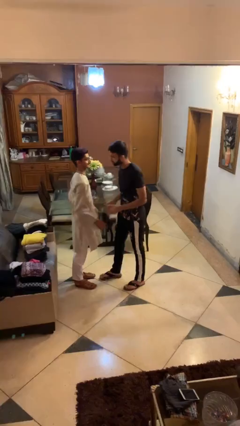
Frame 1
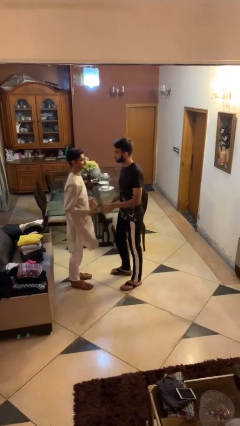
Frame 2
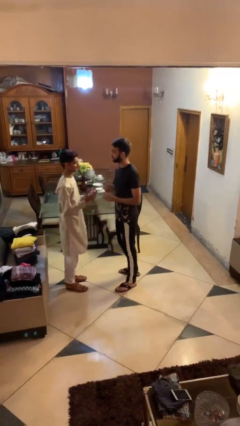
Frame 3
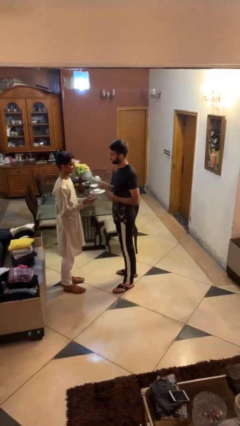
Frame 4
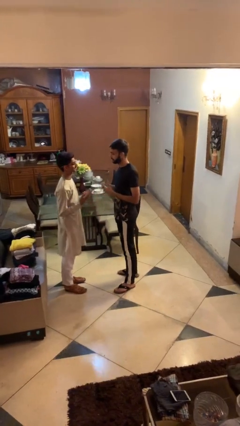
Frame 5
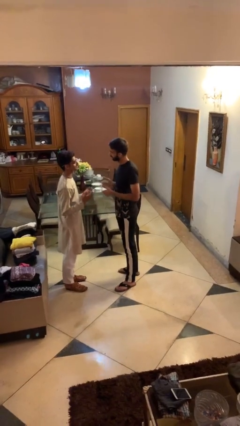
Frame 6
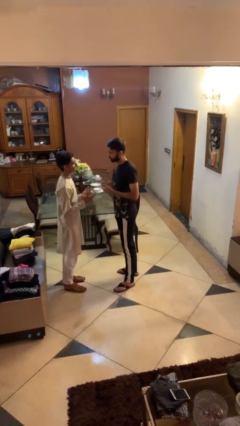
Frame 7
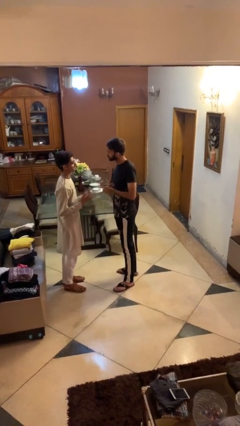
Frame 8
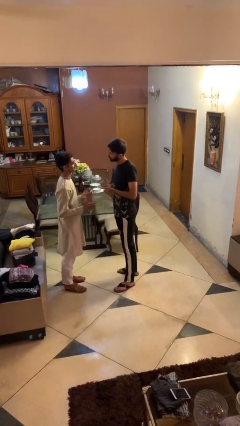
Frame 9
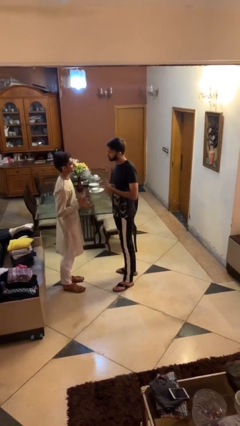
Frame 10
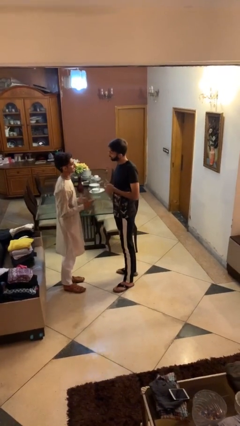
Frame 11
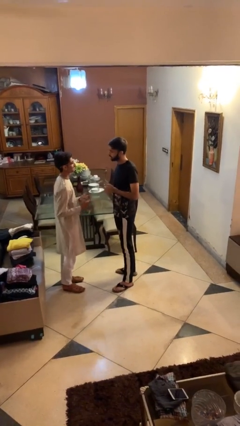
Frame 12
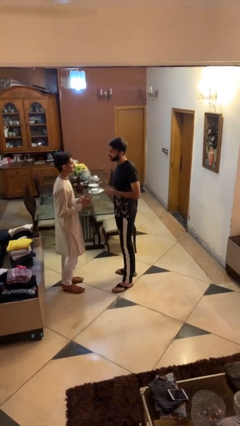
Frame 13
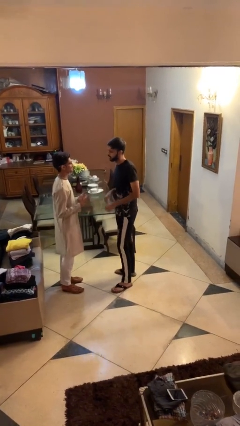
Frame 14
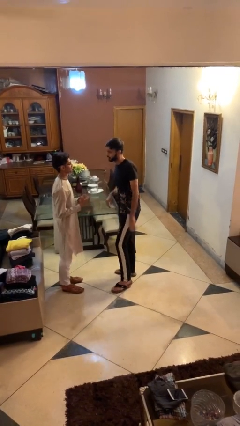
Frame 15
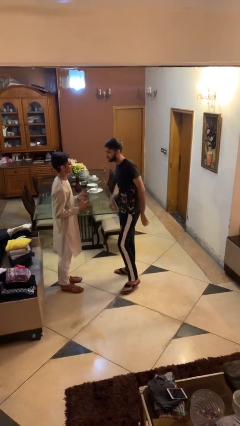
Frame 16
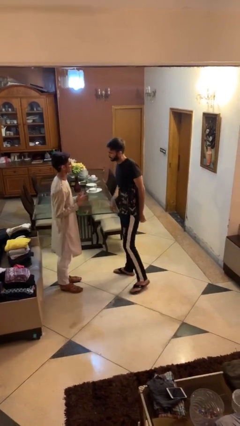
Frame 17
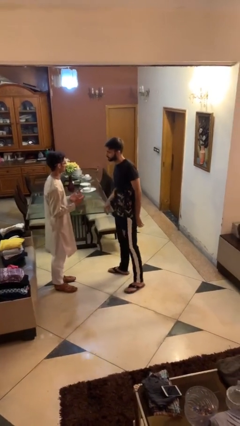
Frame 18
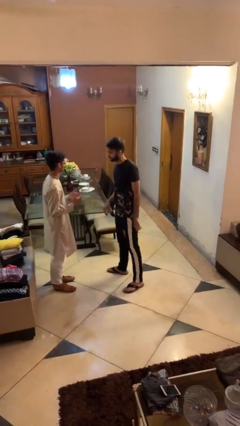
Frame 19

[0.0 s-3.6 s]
person talks to person

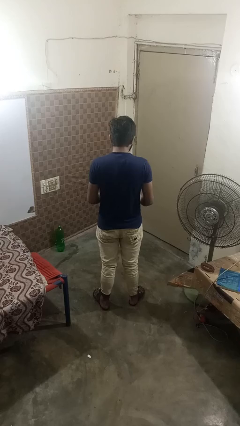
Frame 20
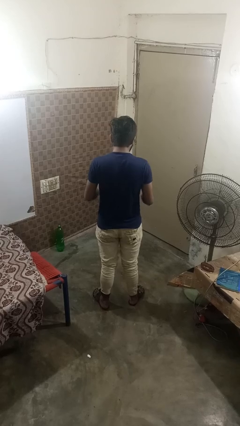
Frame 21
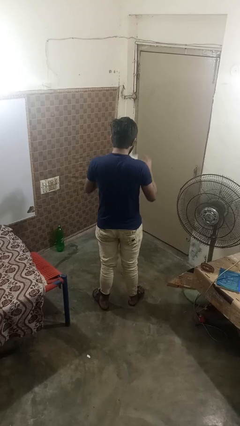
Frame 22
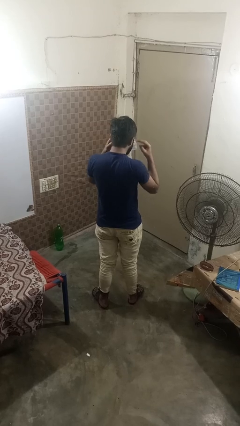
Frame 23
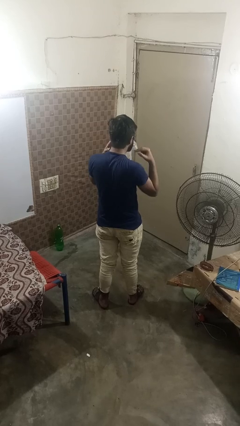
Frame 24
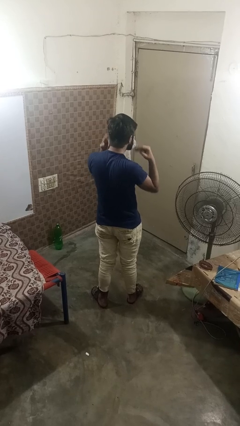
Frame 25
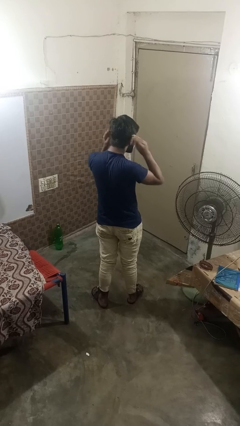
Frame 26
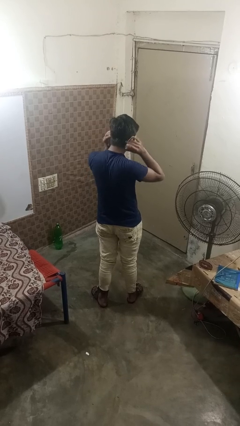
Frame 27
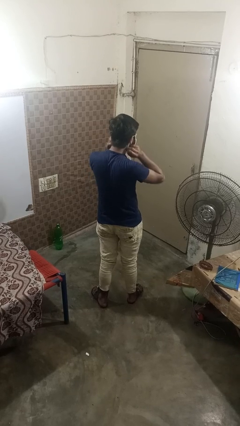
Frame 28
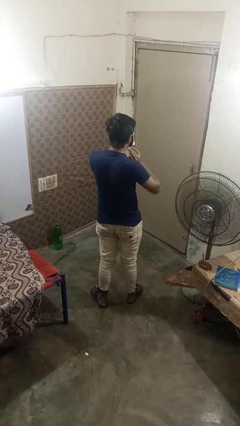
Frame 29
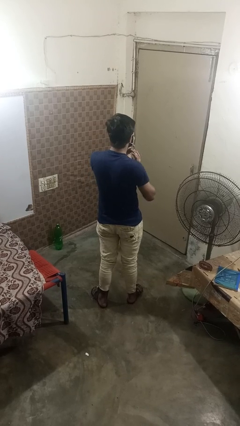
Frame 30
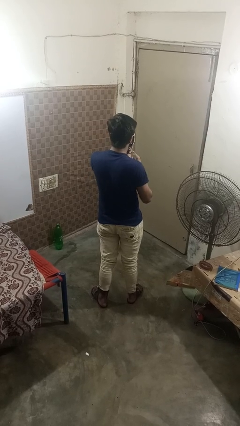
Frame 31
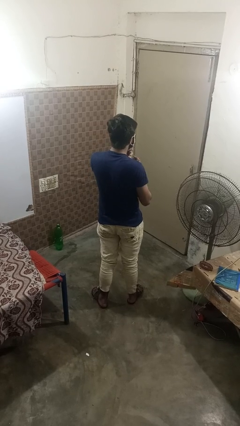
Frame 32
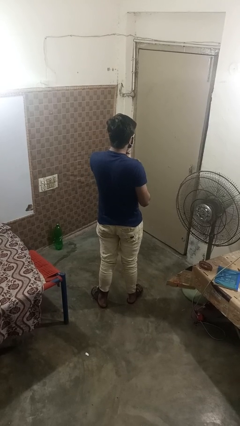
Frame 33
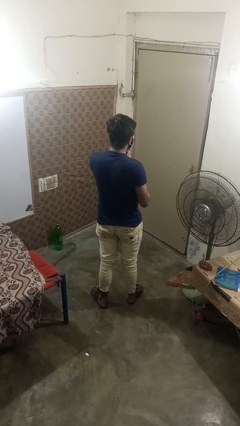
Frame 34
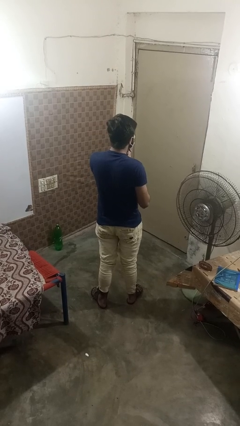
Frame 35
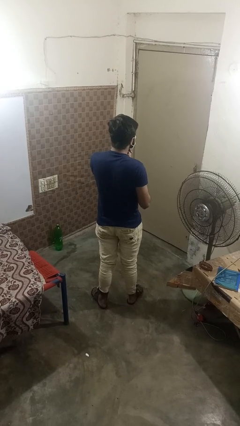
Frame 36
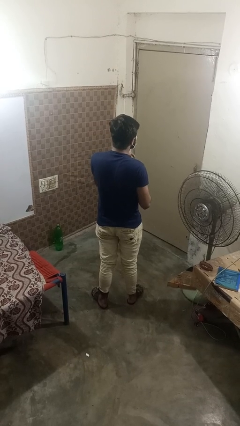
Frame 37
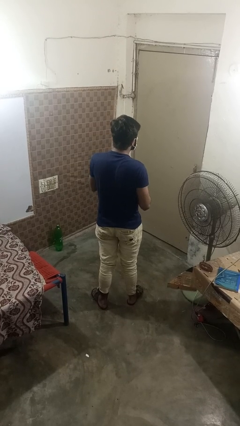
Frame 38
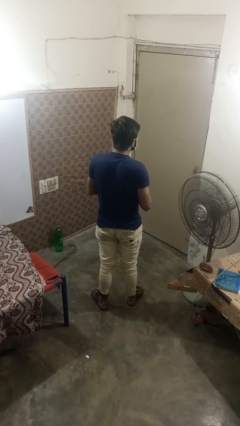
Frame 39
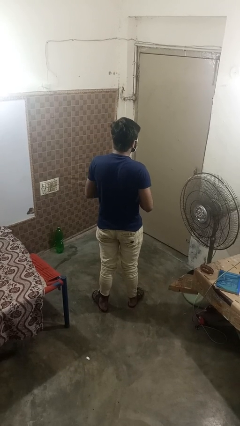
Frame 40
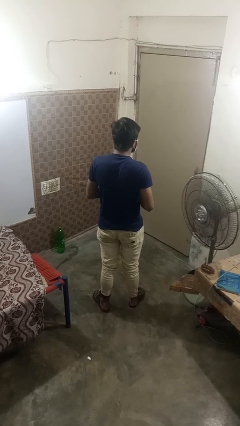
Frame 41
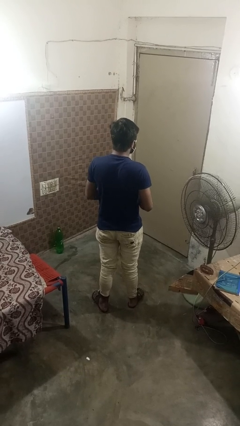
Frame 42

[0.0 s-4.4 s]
person puts on facemask

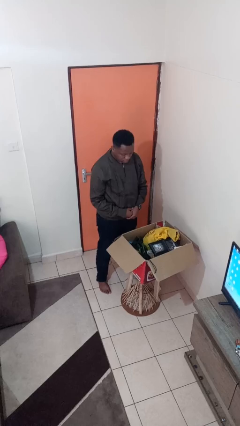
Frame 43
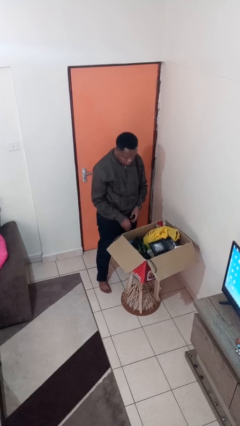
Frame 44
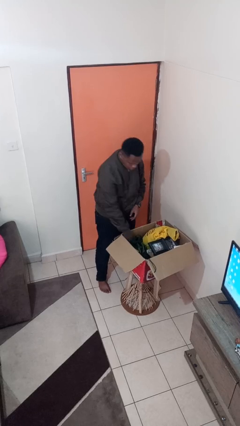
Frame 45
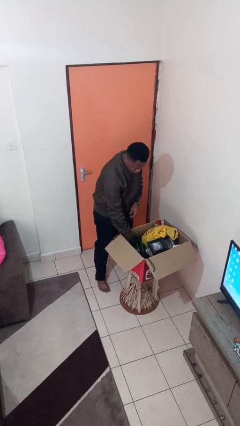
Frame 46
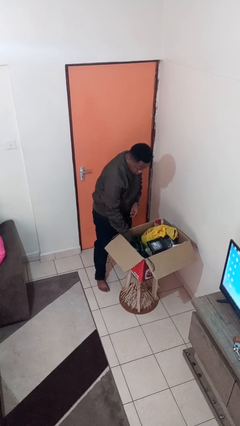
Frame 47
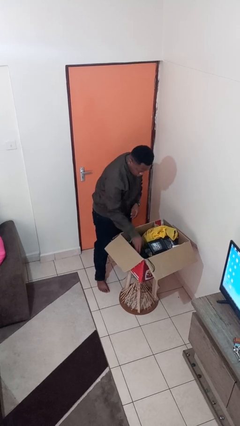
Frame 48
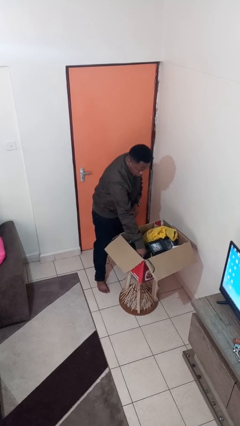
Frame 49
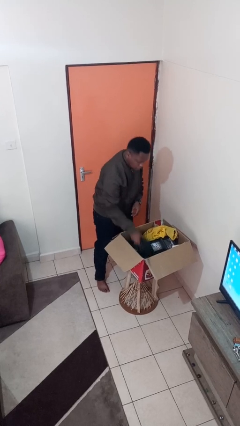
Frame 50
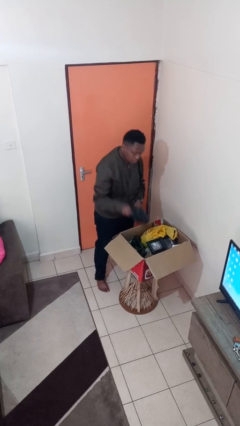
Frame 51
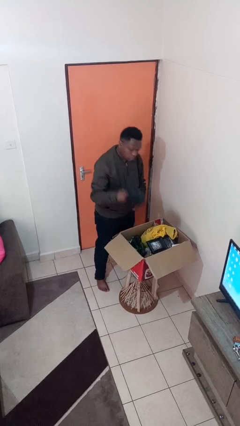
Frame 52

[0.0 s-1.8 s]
person takes object from box

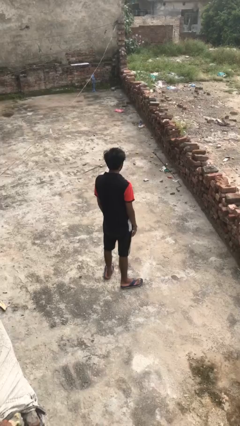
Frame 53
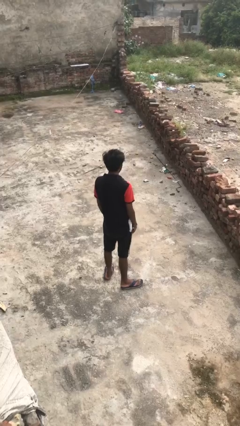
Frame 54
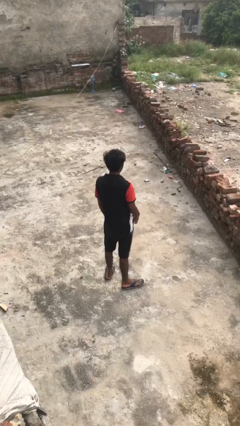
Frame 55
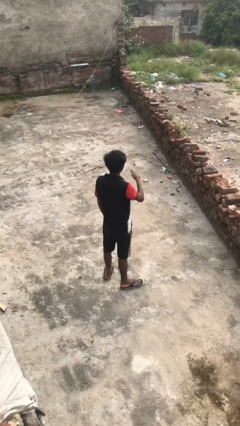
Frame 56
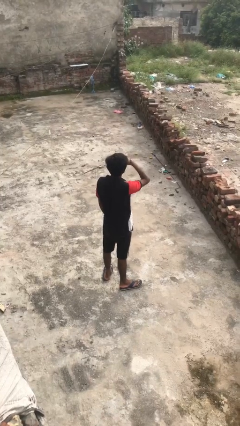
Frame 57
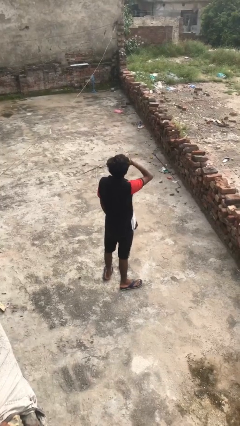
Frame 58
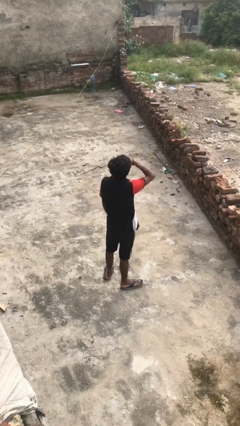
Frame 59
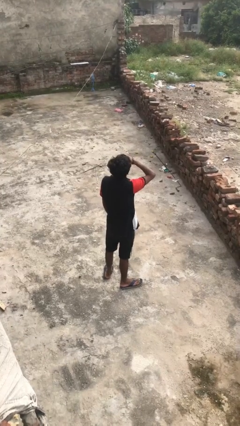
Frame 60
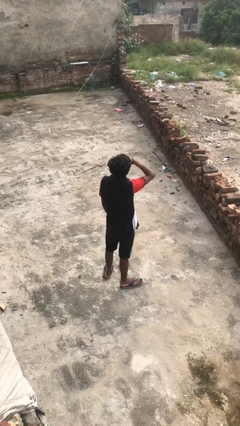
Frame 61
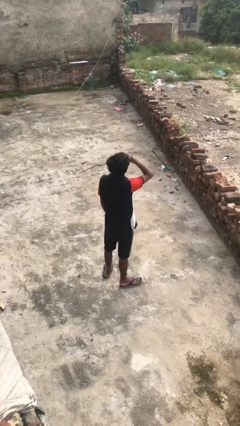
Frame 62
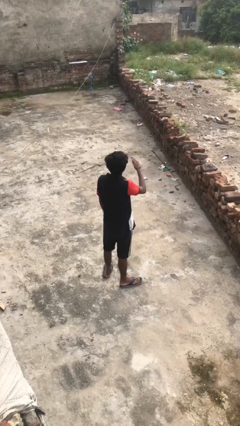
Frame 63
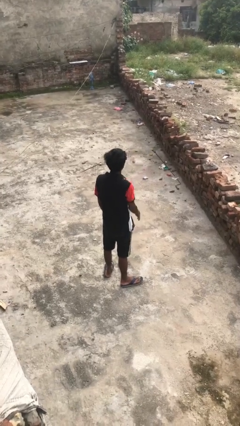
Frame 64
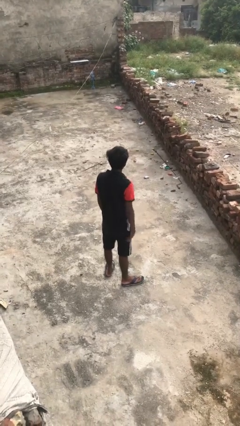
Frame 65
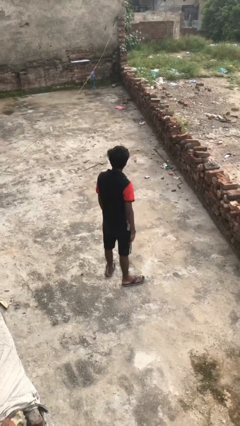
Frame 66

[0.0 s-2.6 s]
person shades eyes

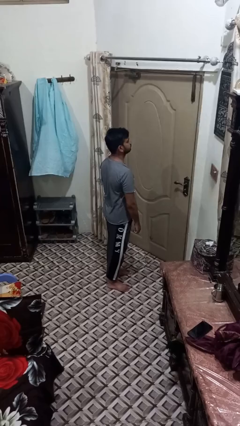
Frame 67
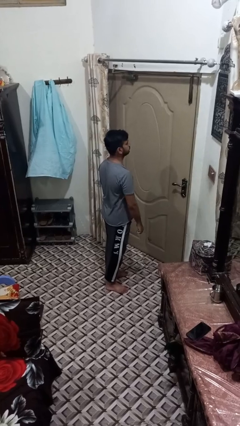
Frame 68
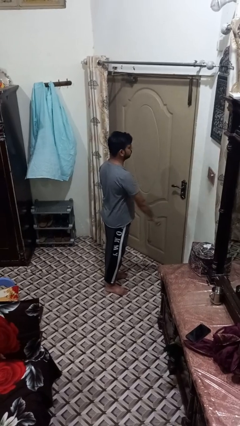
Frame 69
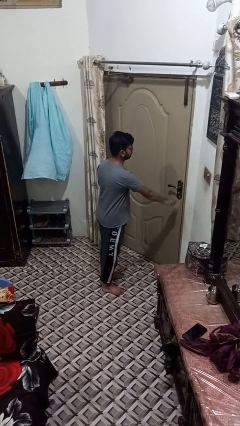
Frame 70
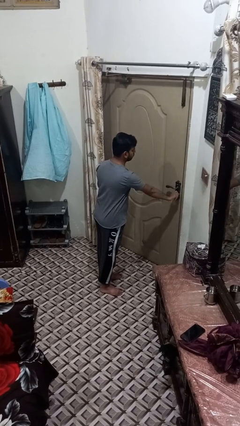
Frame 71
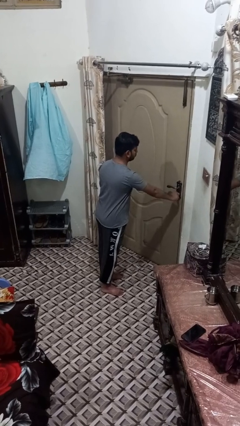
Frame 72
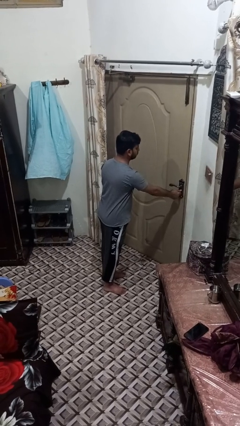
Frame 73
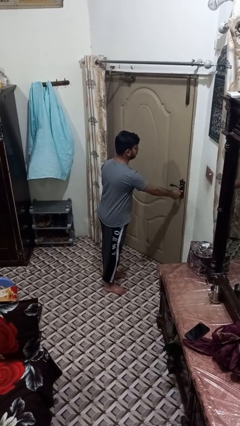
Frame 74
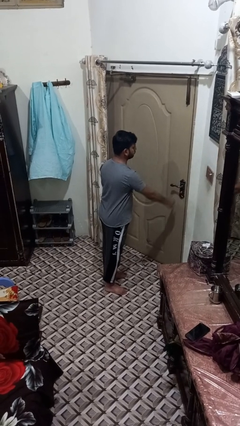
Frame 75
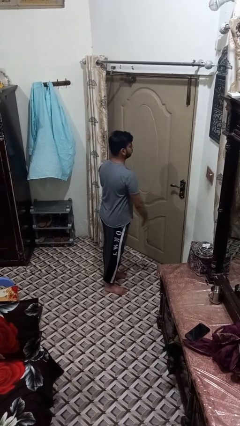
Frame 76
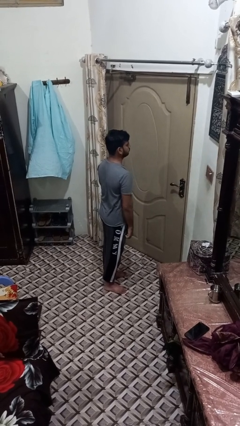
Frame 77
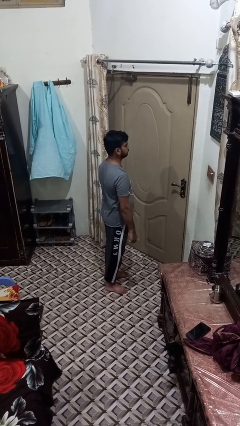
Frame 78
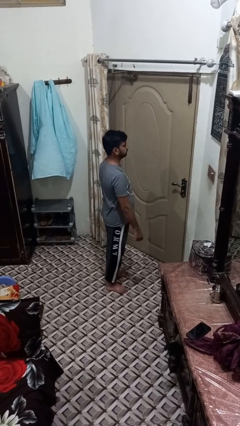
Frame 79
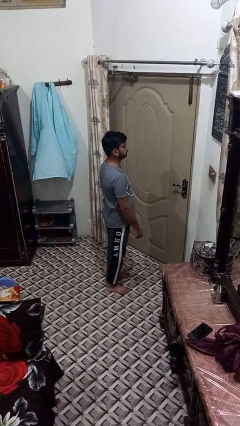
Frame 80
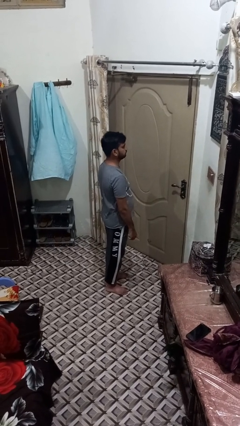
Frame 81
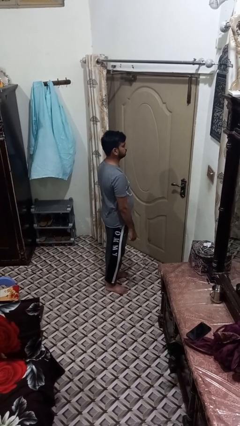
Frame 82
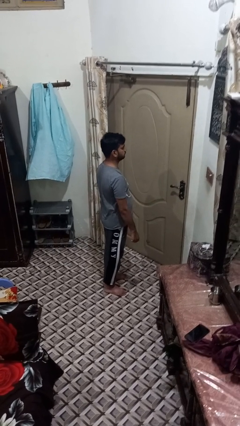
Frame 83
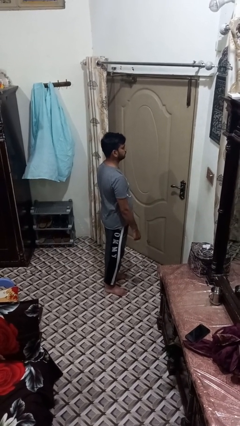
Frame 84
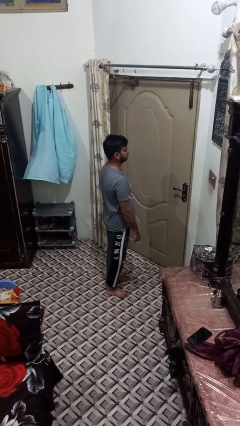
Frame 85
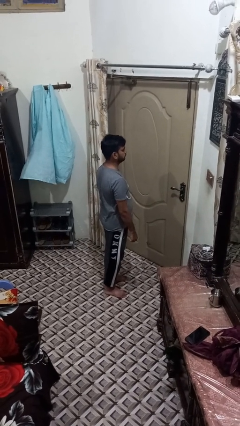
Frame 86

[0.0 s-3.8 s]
person locks door with keys

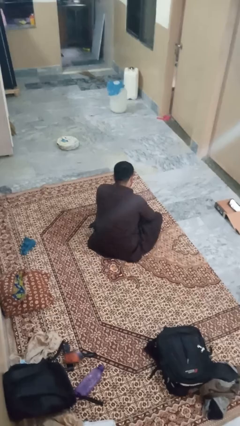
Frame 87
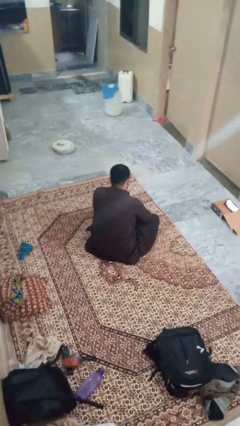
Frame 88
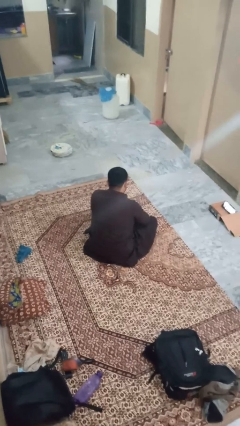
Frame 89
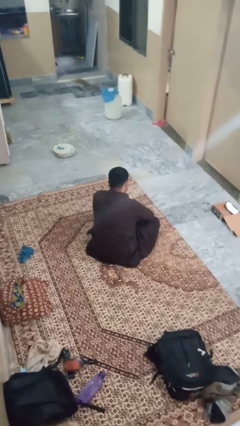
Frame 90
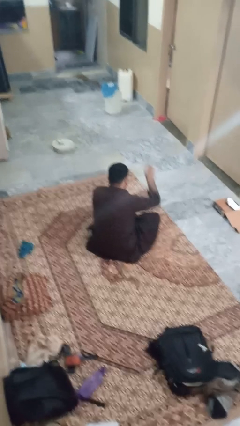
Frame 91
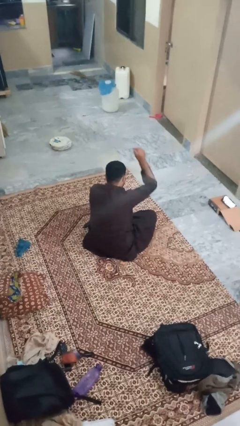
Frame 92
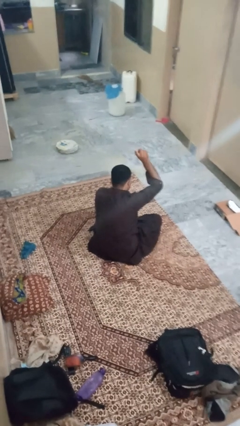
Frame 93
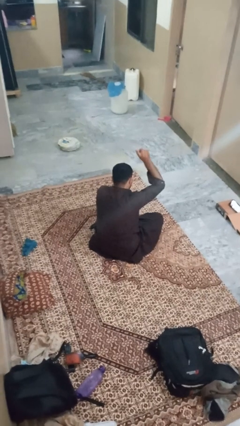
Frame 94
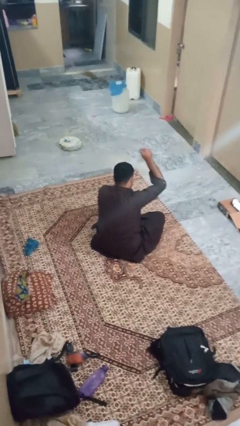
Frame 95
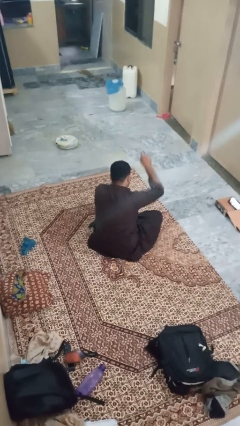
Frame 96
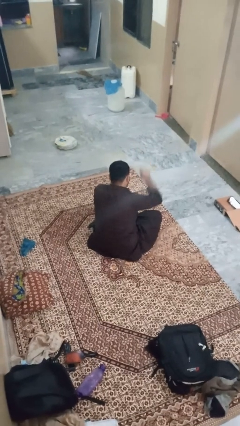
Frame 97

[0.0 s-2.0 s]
person gestures number one
